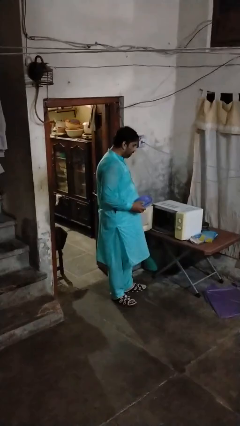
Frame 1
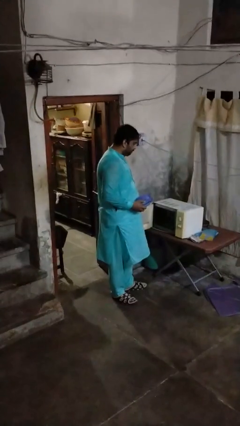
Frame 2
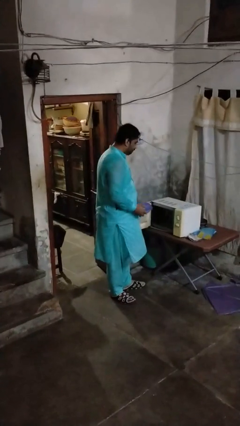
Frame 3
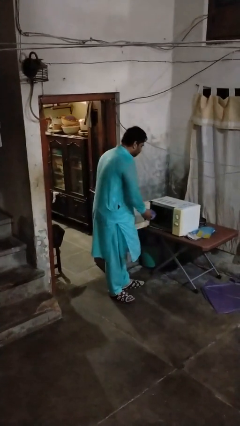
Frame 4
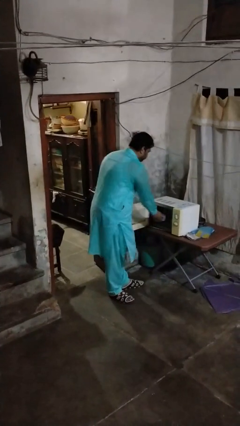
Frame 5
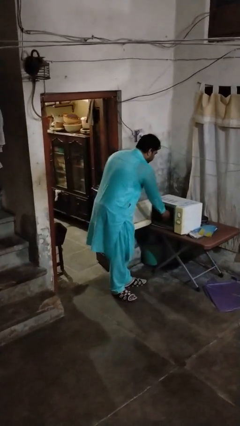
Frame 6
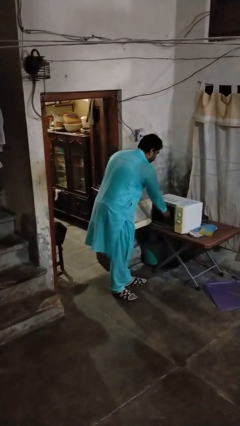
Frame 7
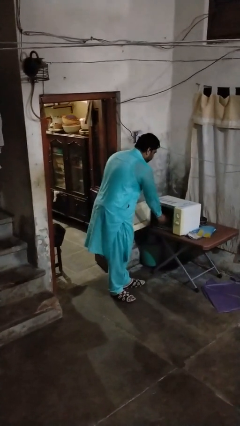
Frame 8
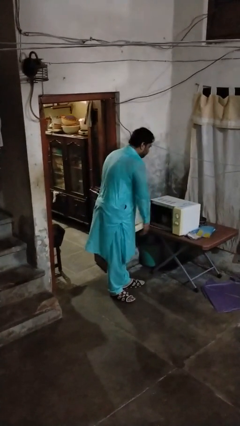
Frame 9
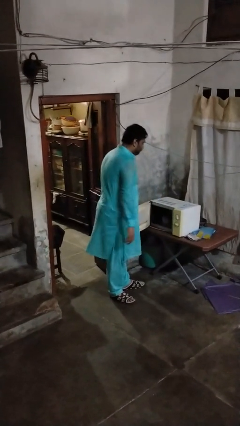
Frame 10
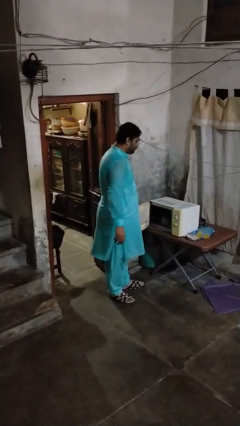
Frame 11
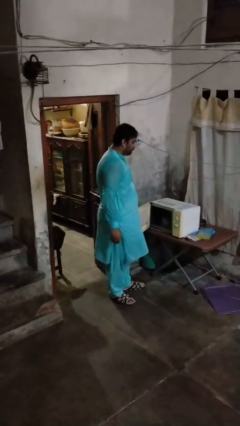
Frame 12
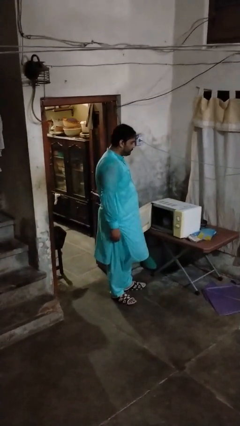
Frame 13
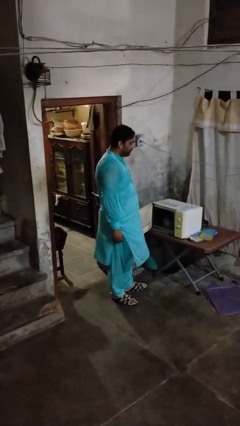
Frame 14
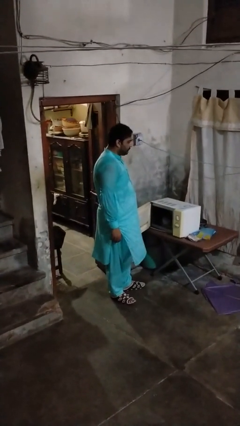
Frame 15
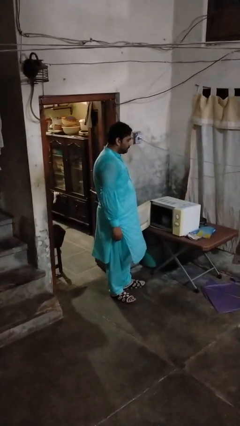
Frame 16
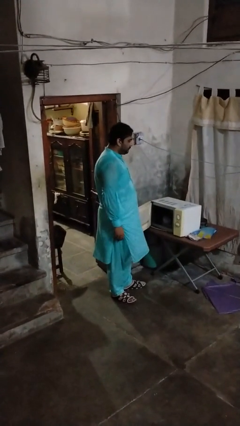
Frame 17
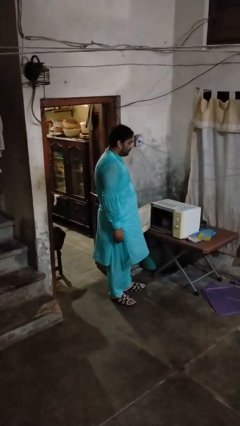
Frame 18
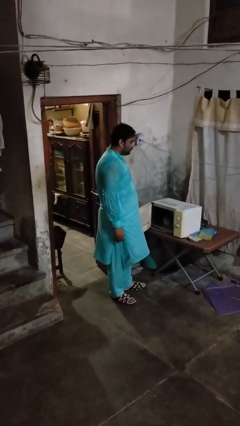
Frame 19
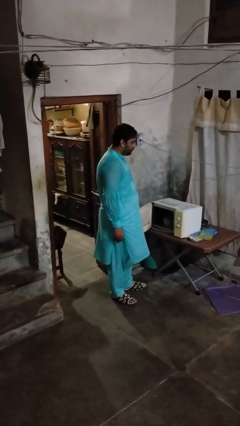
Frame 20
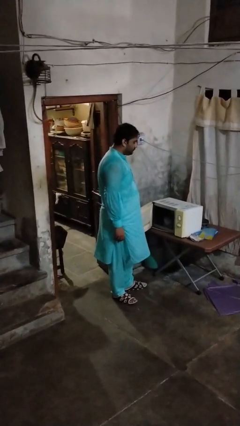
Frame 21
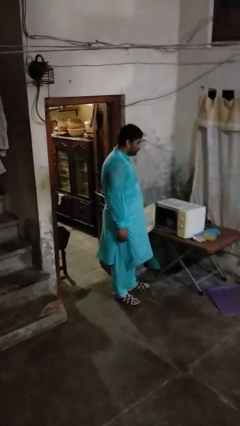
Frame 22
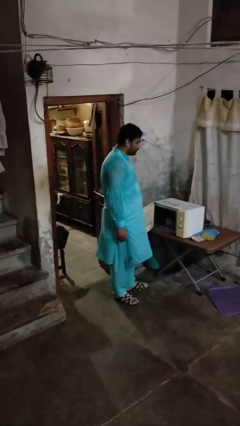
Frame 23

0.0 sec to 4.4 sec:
person puts object into microwave

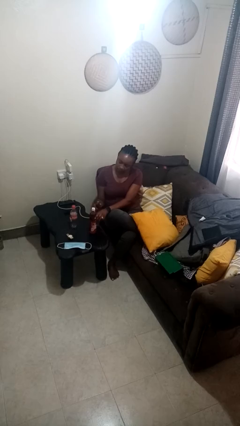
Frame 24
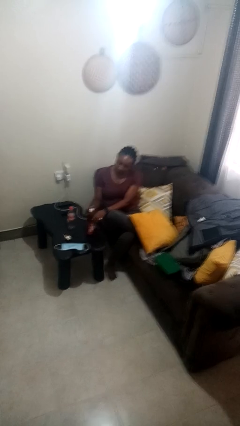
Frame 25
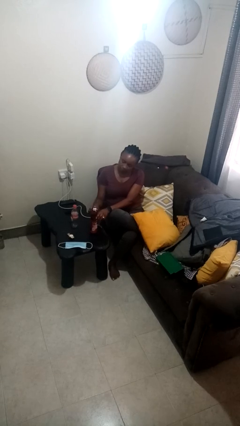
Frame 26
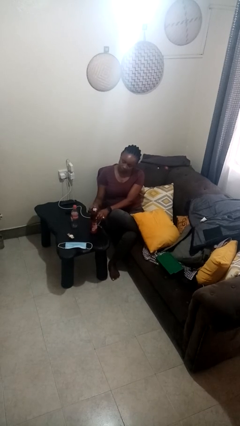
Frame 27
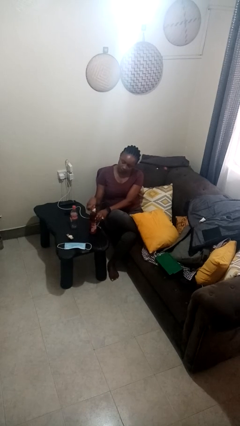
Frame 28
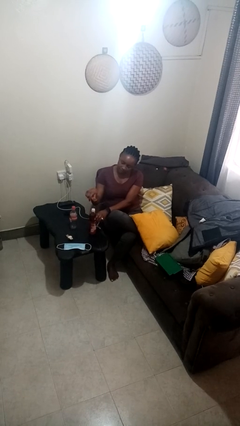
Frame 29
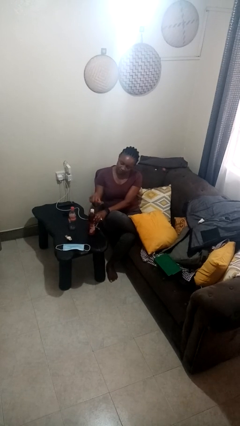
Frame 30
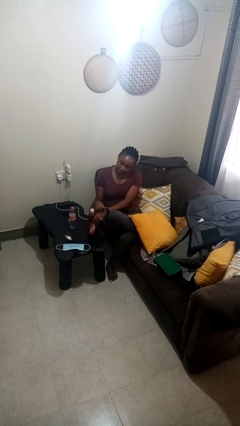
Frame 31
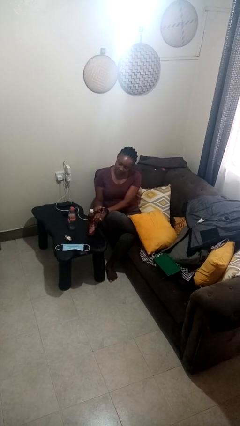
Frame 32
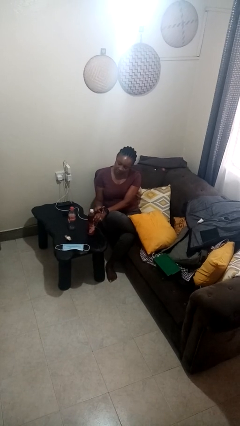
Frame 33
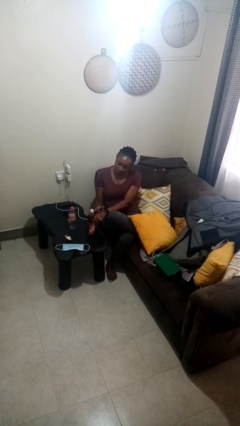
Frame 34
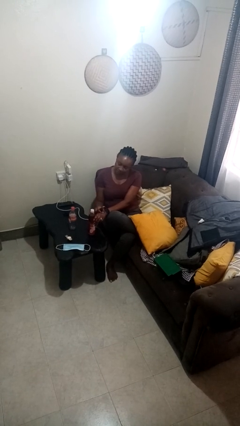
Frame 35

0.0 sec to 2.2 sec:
person opens can with can opener

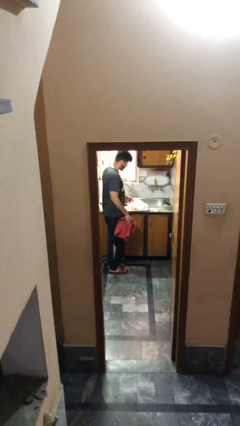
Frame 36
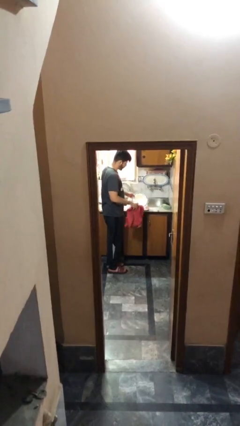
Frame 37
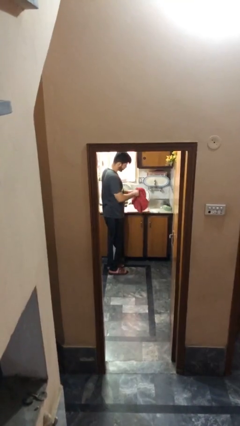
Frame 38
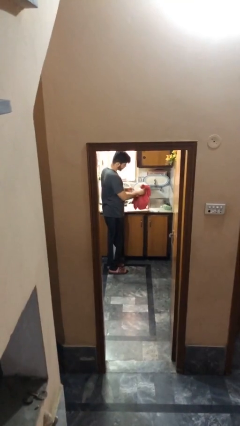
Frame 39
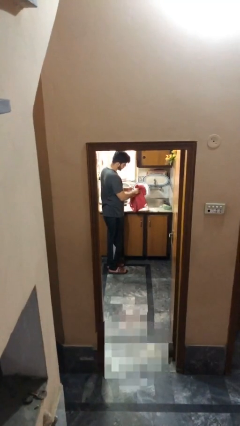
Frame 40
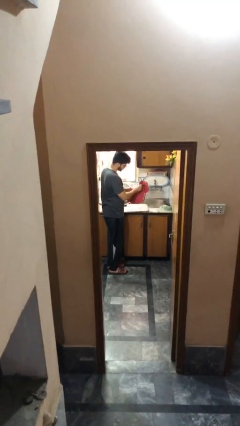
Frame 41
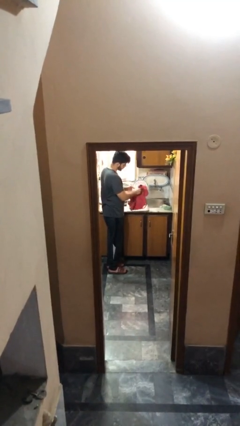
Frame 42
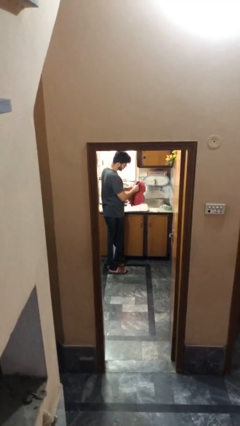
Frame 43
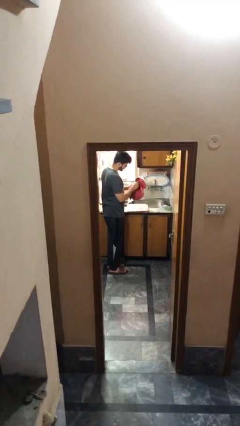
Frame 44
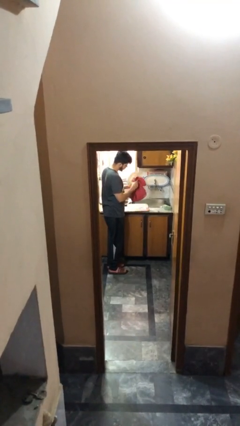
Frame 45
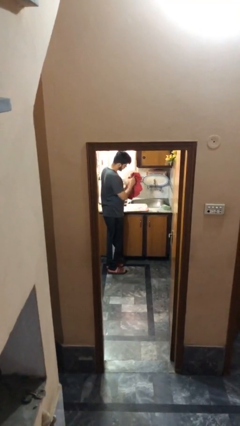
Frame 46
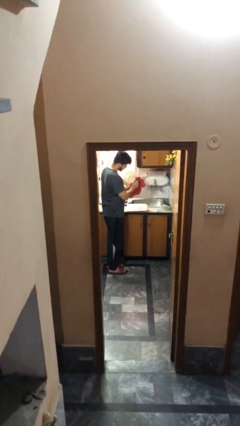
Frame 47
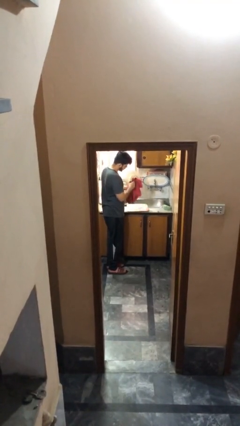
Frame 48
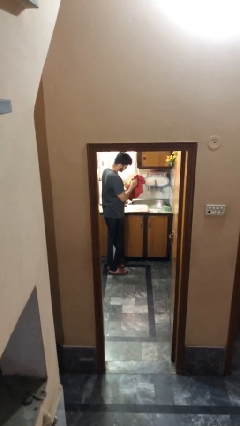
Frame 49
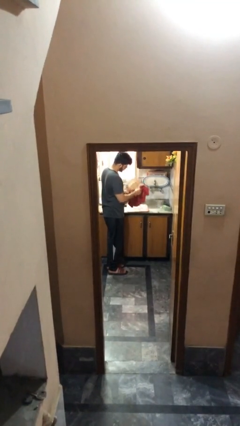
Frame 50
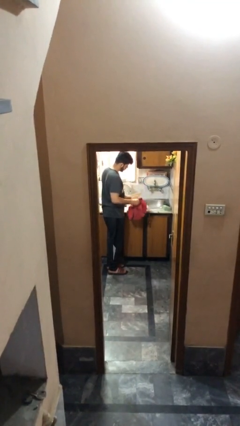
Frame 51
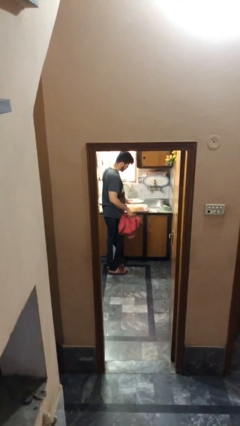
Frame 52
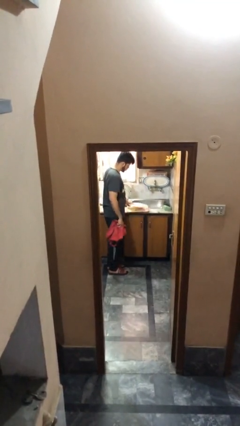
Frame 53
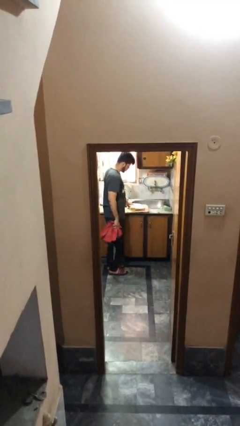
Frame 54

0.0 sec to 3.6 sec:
person dries dish

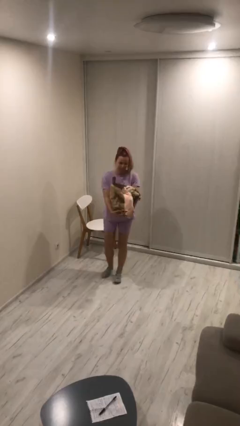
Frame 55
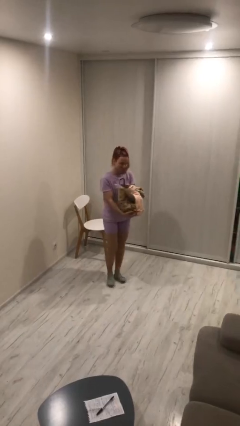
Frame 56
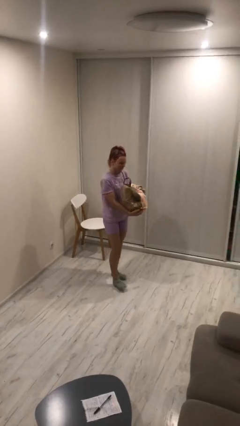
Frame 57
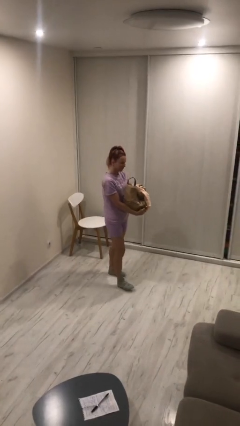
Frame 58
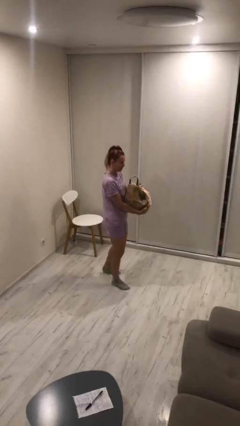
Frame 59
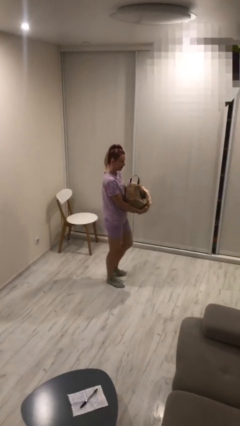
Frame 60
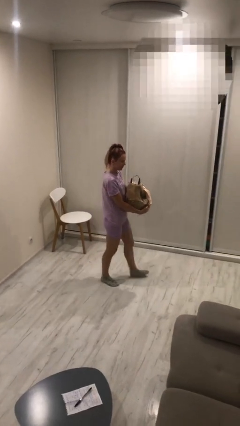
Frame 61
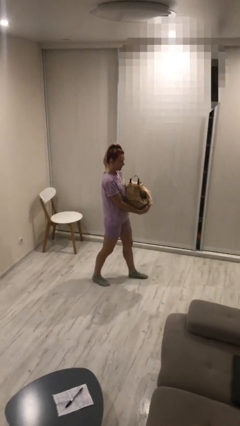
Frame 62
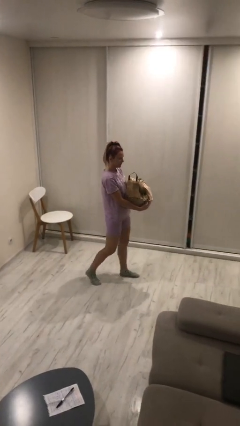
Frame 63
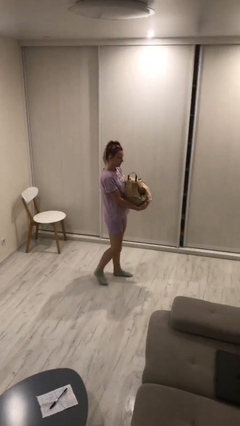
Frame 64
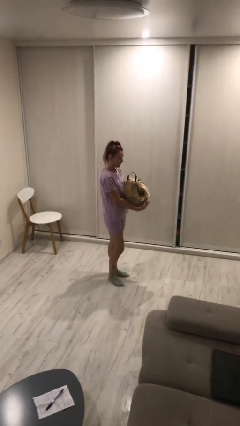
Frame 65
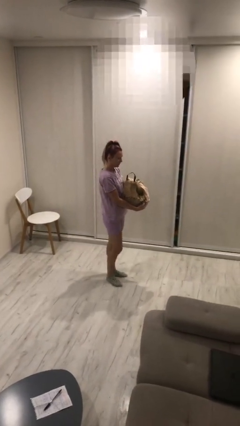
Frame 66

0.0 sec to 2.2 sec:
person carries laundry basket

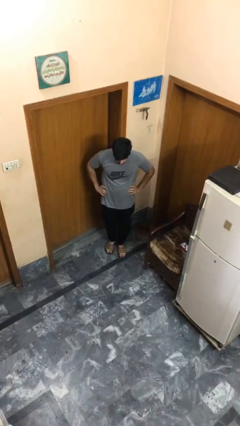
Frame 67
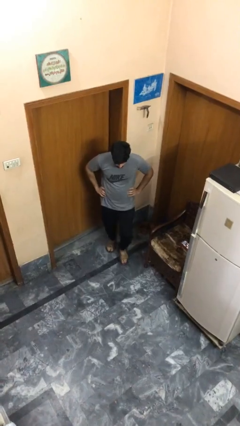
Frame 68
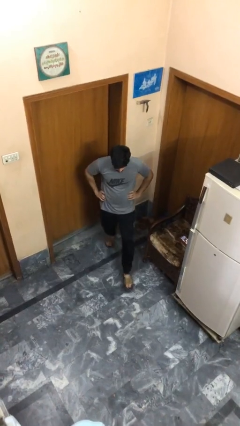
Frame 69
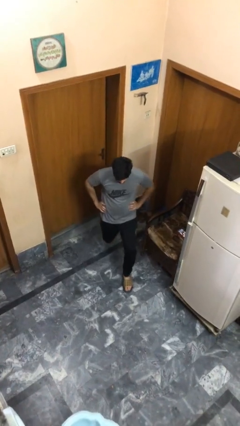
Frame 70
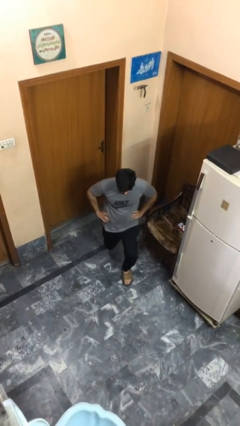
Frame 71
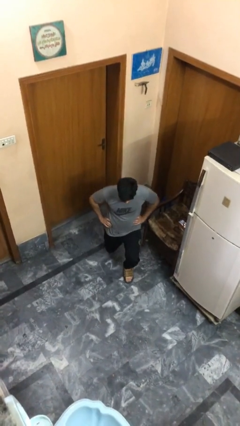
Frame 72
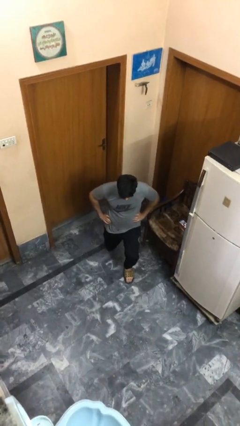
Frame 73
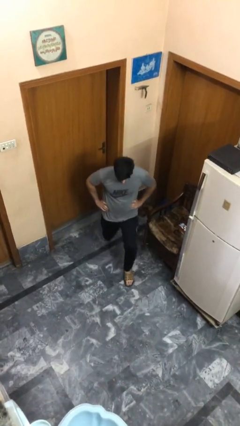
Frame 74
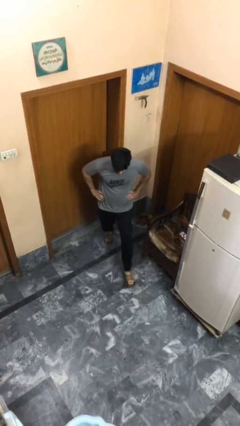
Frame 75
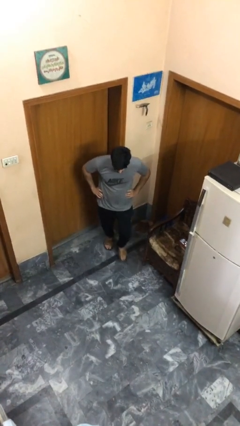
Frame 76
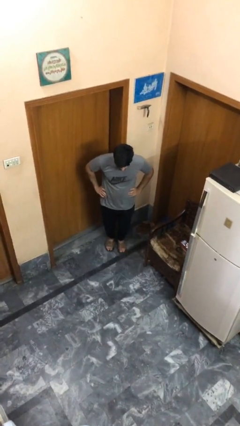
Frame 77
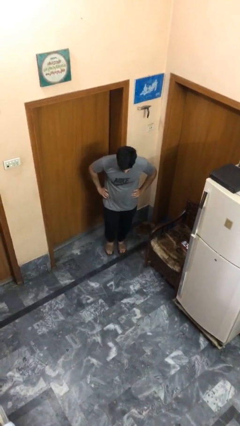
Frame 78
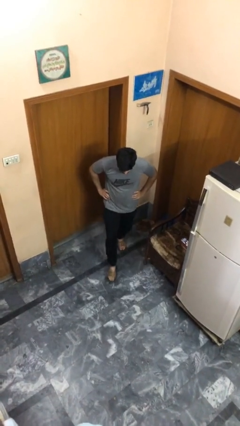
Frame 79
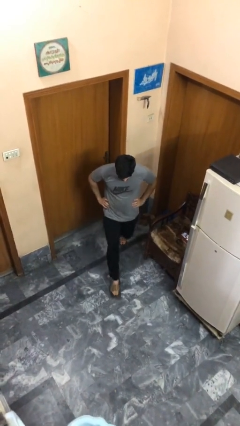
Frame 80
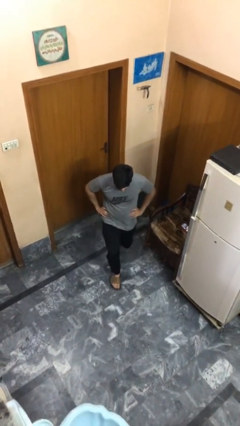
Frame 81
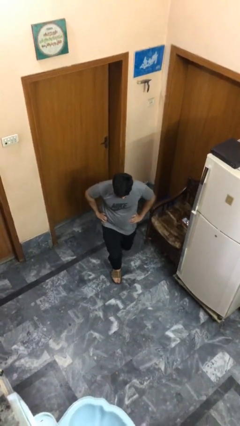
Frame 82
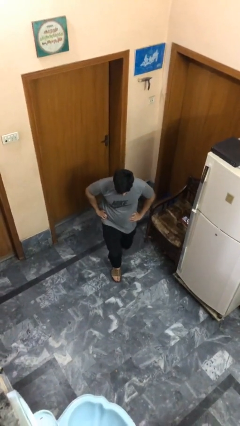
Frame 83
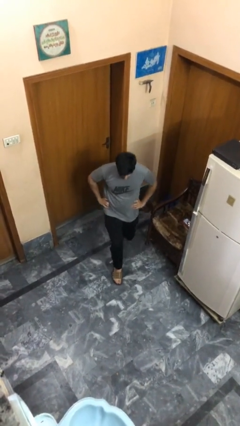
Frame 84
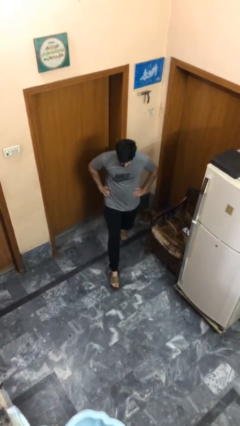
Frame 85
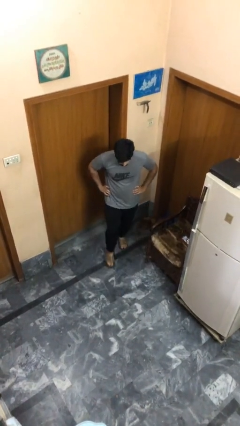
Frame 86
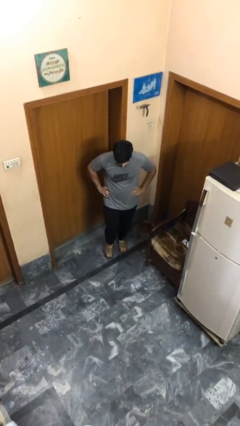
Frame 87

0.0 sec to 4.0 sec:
person exercises with lunges

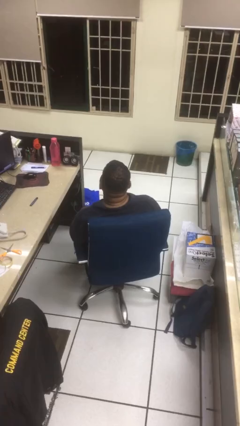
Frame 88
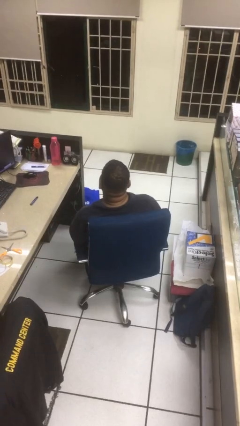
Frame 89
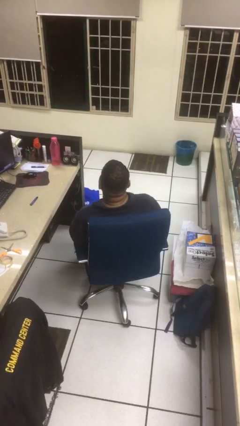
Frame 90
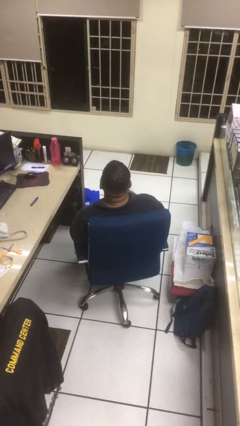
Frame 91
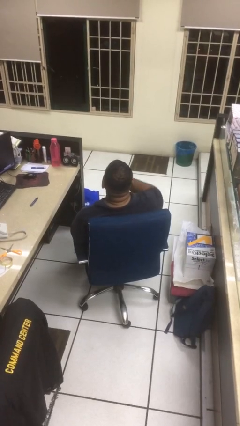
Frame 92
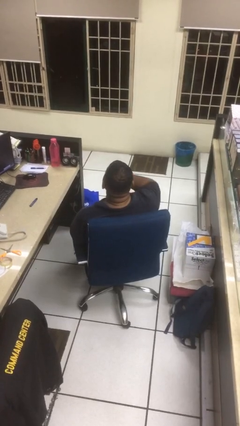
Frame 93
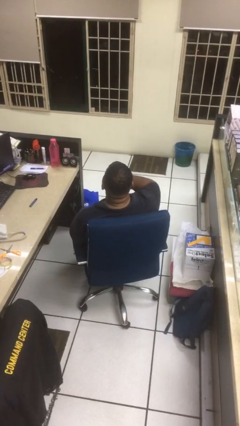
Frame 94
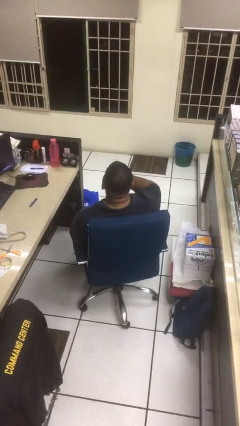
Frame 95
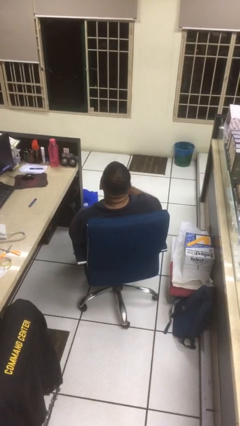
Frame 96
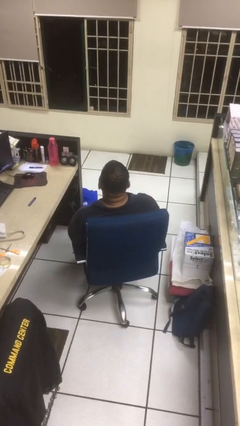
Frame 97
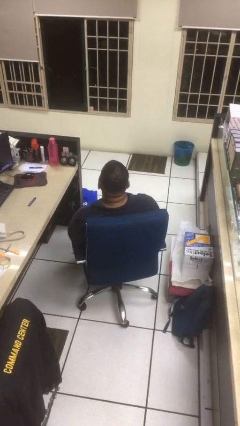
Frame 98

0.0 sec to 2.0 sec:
person gestures be quiet
